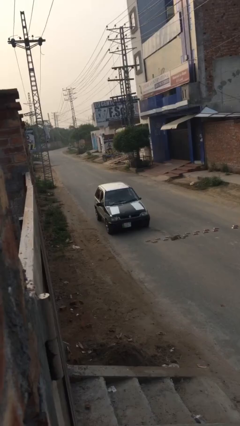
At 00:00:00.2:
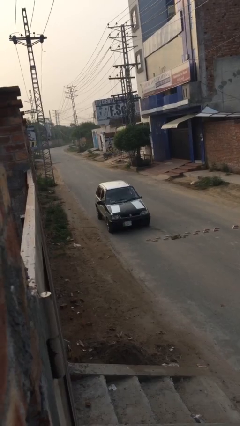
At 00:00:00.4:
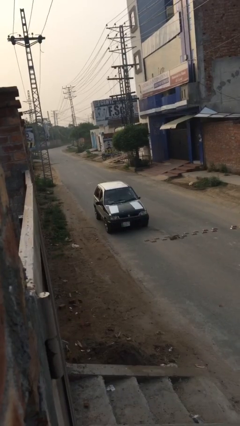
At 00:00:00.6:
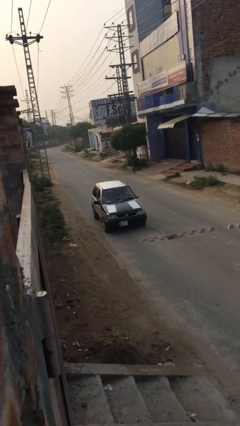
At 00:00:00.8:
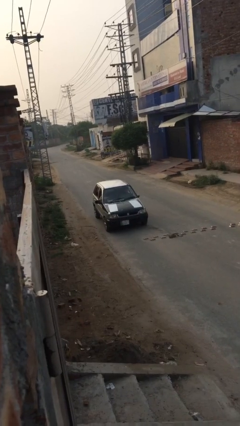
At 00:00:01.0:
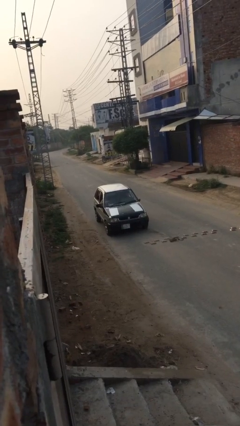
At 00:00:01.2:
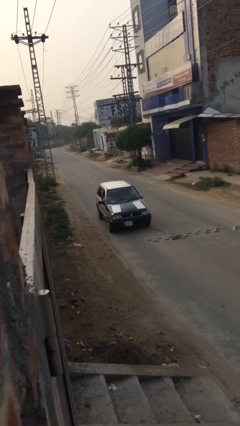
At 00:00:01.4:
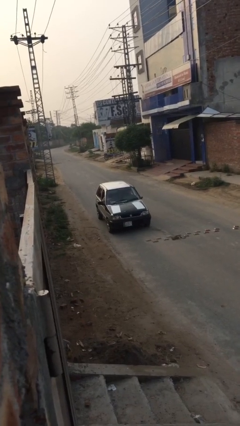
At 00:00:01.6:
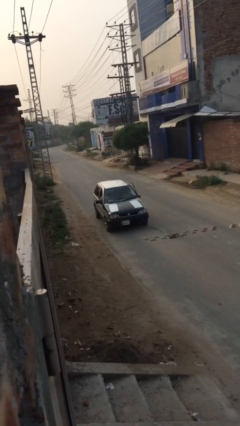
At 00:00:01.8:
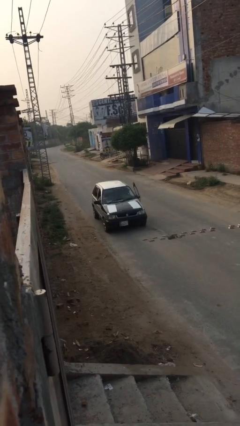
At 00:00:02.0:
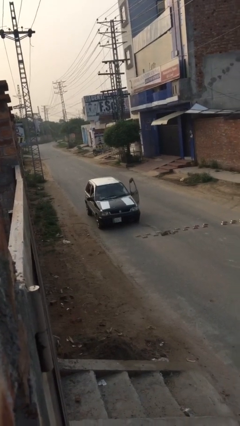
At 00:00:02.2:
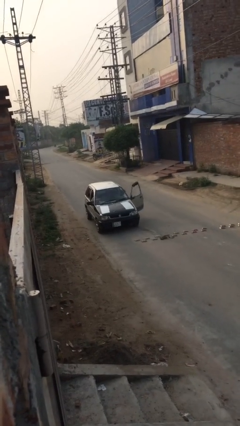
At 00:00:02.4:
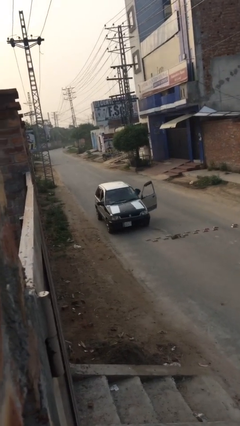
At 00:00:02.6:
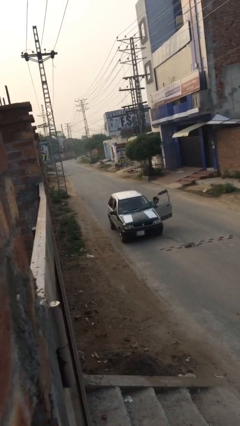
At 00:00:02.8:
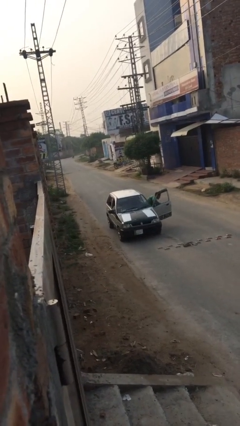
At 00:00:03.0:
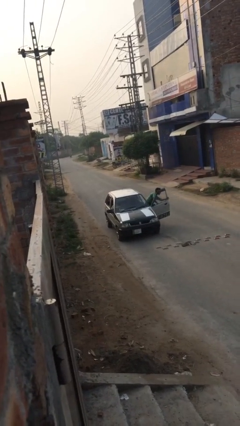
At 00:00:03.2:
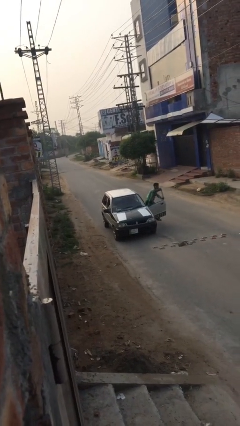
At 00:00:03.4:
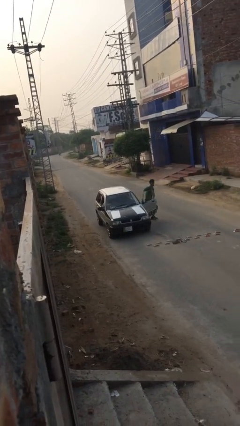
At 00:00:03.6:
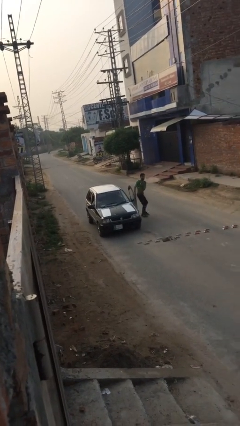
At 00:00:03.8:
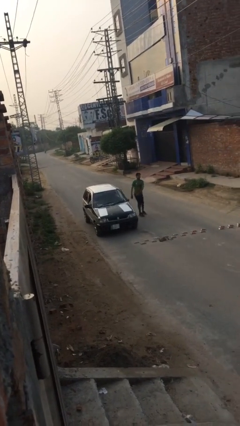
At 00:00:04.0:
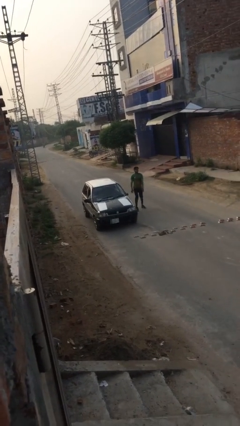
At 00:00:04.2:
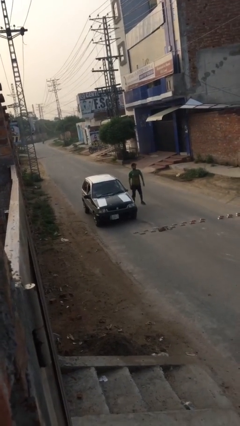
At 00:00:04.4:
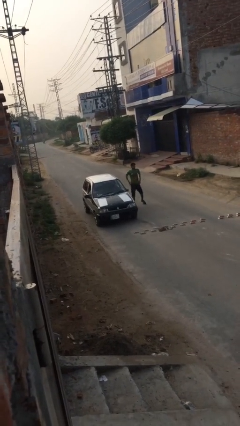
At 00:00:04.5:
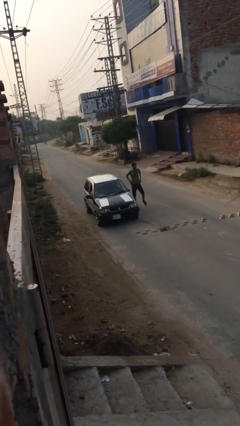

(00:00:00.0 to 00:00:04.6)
car drops off person

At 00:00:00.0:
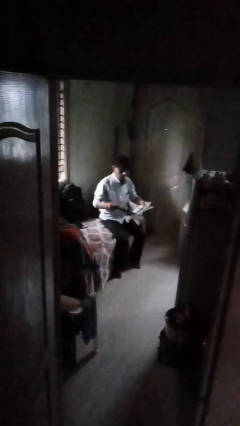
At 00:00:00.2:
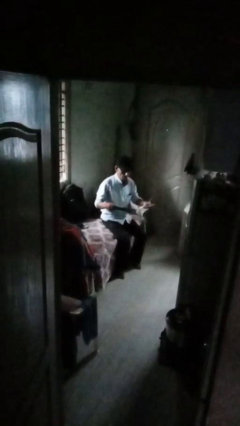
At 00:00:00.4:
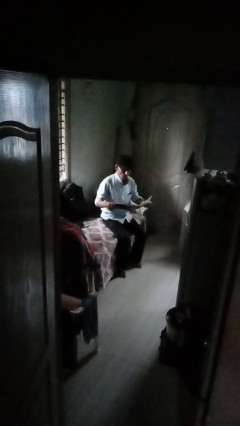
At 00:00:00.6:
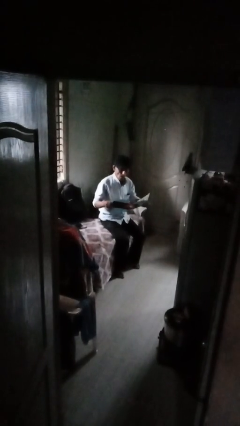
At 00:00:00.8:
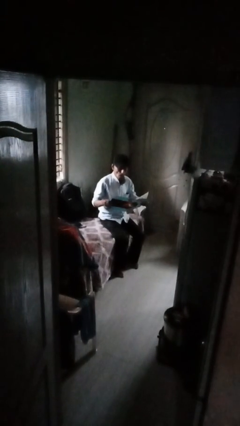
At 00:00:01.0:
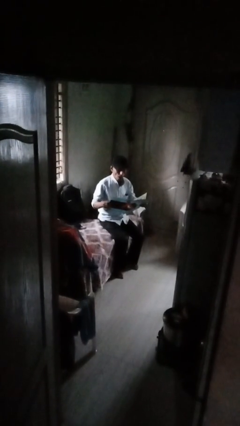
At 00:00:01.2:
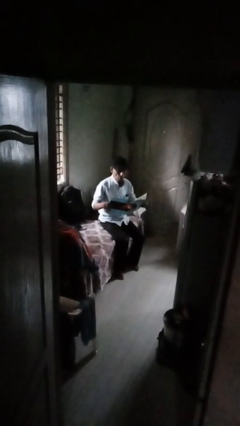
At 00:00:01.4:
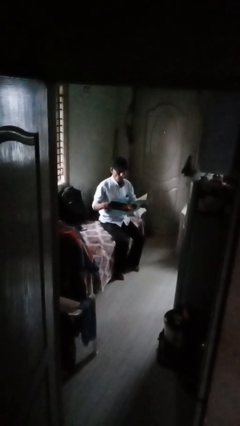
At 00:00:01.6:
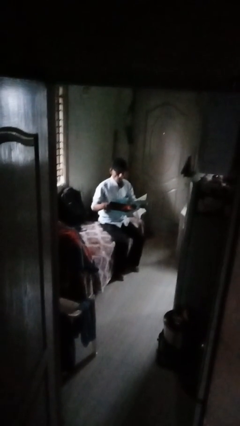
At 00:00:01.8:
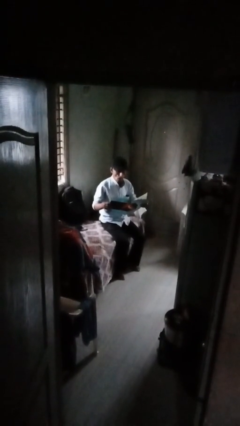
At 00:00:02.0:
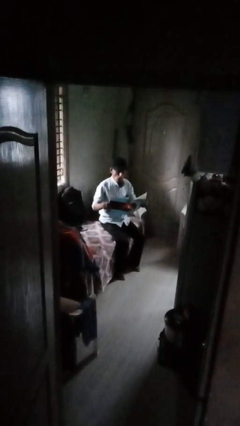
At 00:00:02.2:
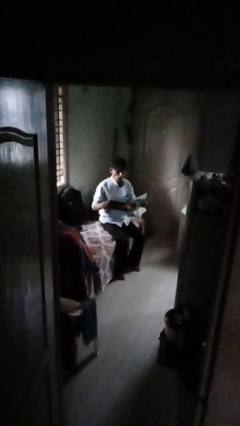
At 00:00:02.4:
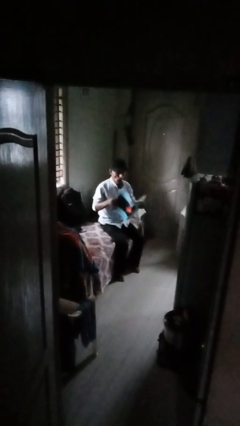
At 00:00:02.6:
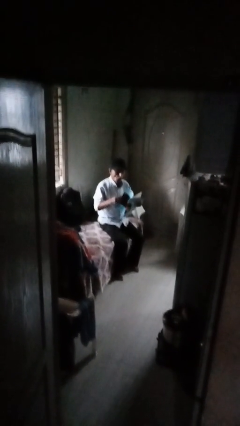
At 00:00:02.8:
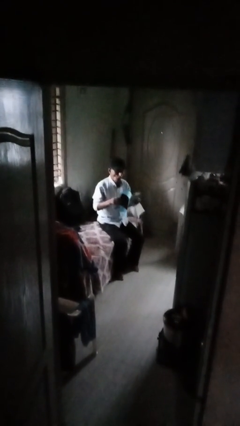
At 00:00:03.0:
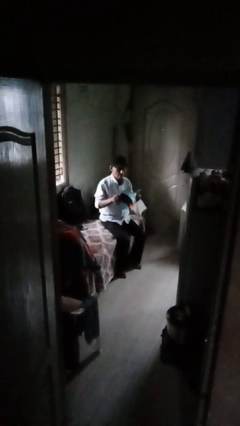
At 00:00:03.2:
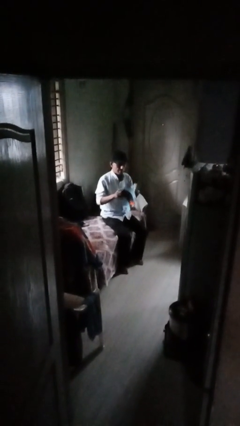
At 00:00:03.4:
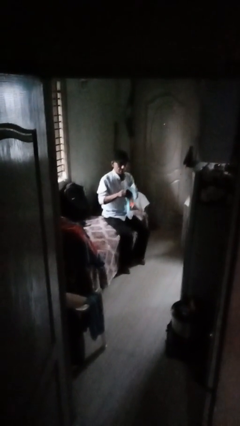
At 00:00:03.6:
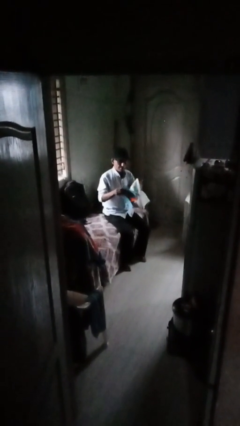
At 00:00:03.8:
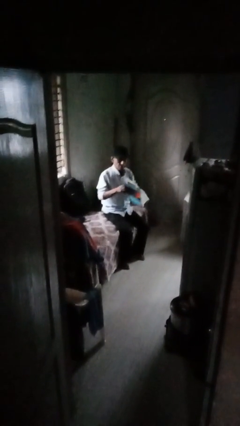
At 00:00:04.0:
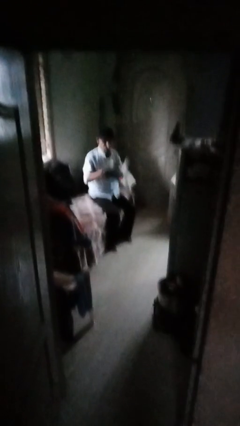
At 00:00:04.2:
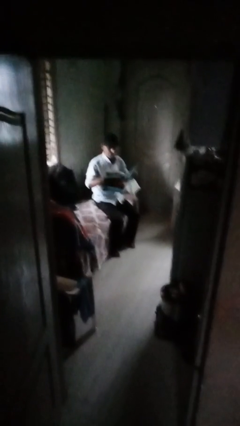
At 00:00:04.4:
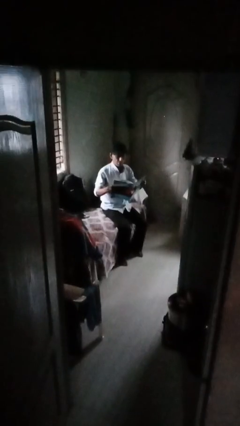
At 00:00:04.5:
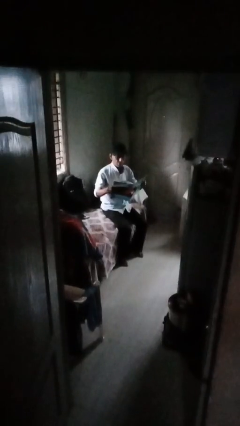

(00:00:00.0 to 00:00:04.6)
person reads magazine

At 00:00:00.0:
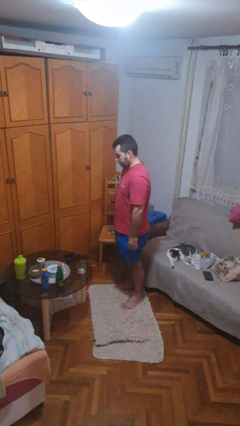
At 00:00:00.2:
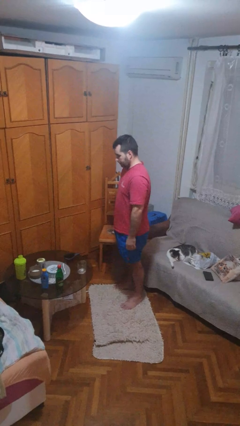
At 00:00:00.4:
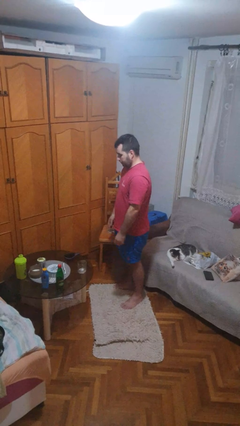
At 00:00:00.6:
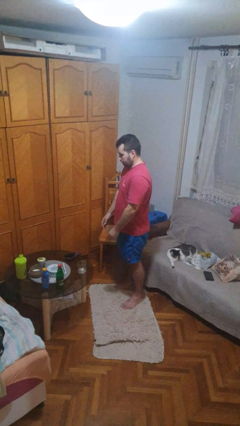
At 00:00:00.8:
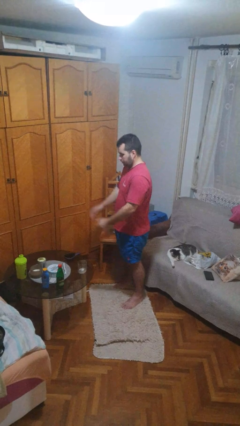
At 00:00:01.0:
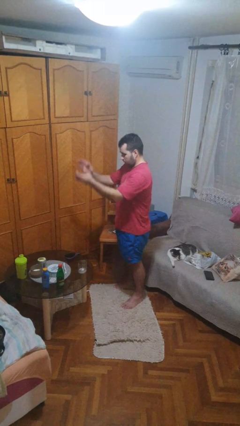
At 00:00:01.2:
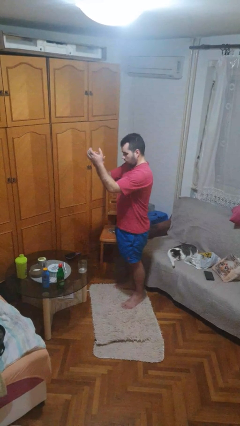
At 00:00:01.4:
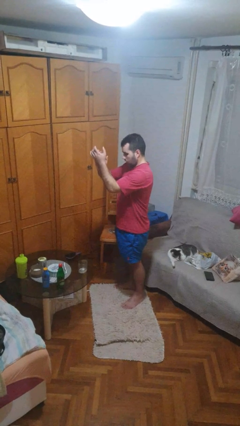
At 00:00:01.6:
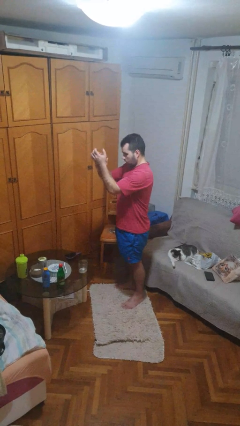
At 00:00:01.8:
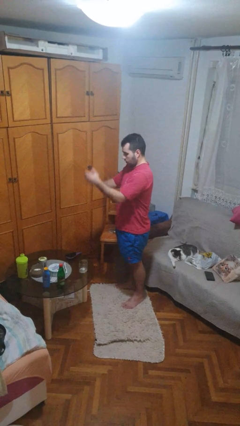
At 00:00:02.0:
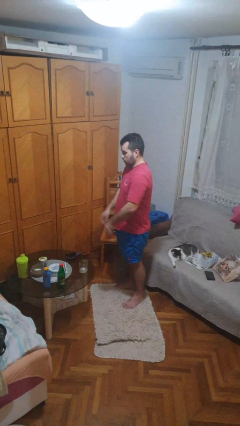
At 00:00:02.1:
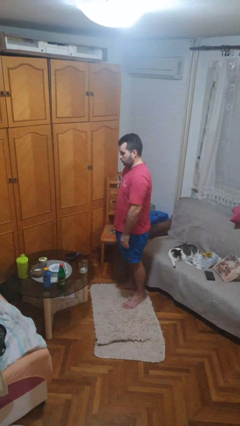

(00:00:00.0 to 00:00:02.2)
person claps hands

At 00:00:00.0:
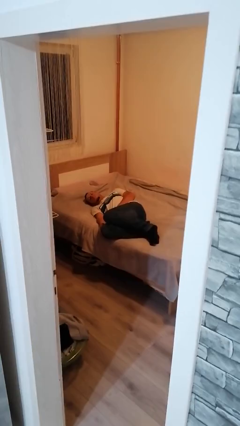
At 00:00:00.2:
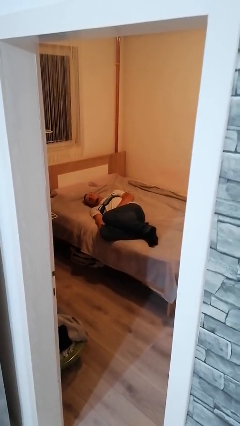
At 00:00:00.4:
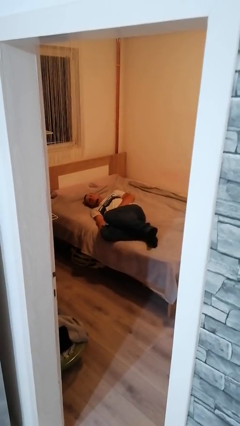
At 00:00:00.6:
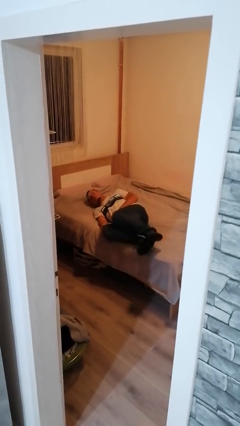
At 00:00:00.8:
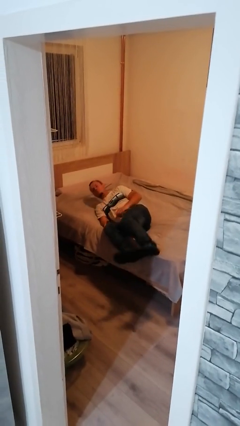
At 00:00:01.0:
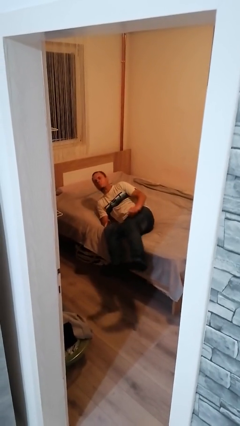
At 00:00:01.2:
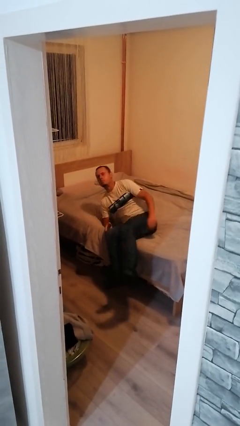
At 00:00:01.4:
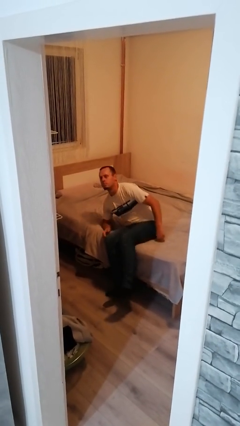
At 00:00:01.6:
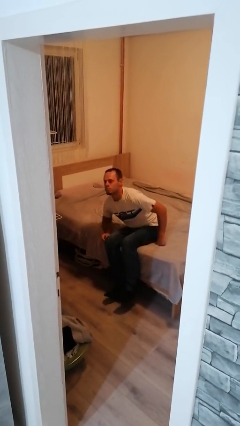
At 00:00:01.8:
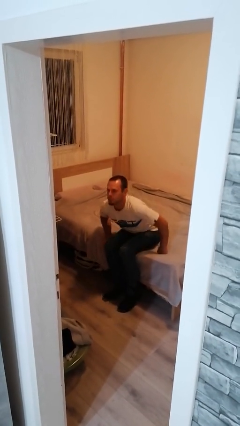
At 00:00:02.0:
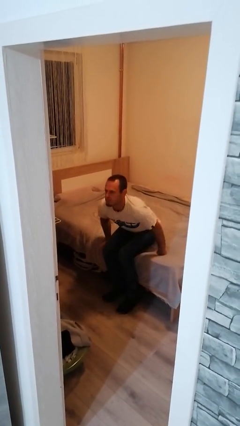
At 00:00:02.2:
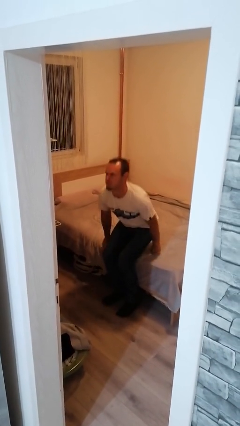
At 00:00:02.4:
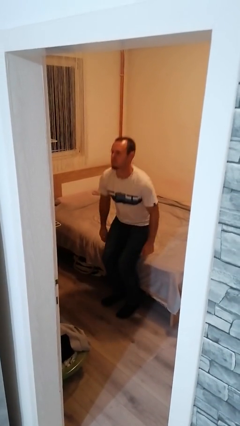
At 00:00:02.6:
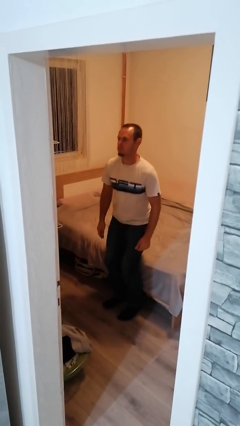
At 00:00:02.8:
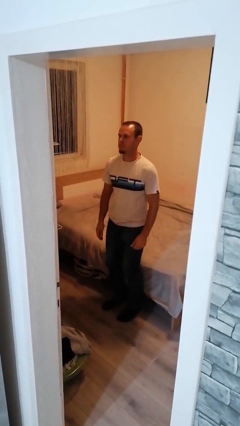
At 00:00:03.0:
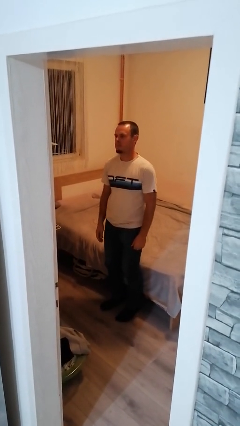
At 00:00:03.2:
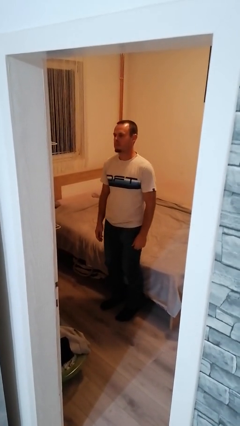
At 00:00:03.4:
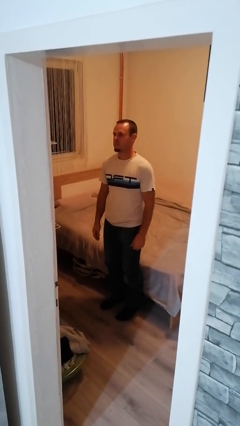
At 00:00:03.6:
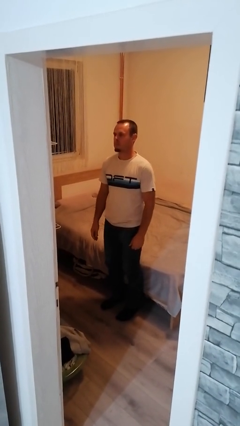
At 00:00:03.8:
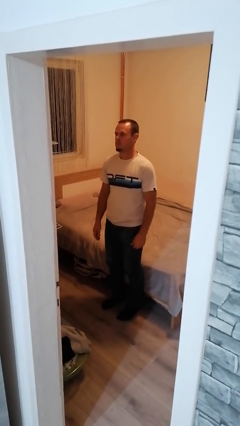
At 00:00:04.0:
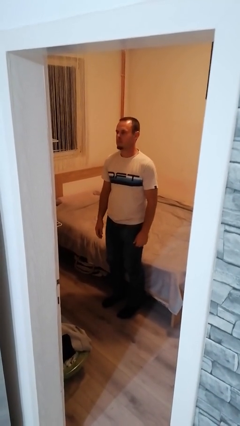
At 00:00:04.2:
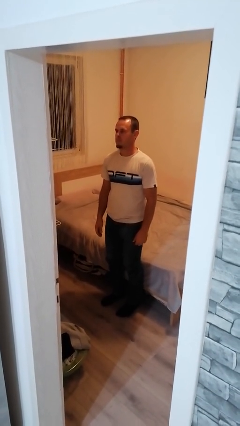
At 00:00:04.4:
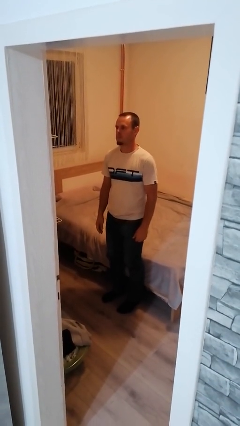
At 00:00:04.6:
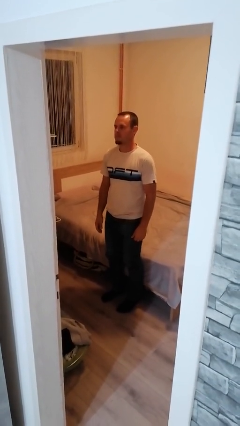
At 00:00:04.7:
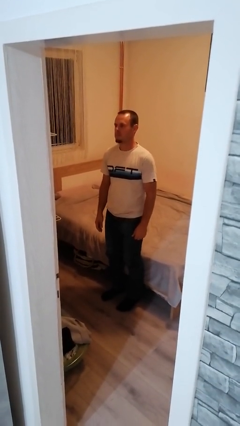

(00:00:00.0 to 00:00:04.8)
person stands up

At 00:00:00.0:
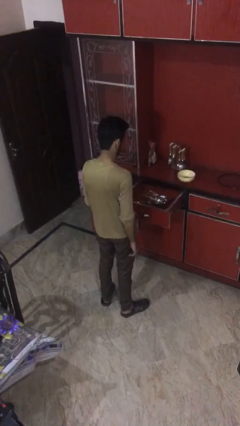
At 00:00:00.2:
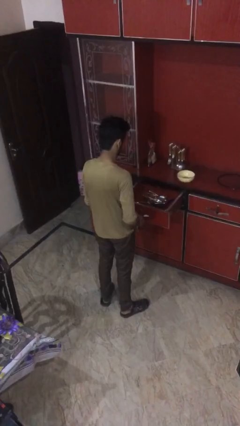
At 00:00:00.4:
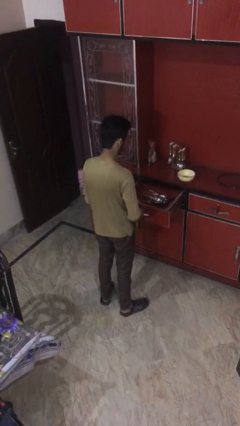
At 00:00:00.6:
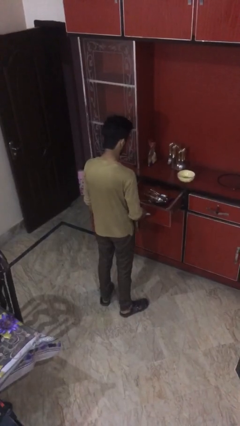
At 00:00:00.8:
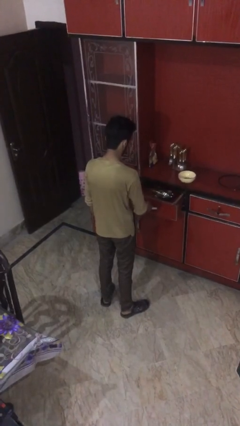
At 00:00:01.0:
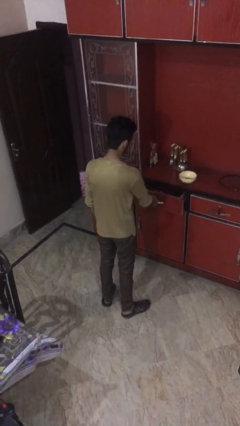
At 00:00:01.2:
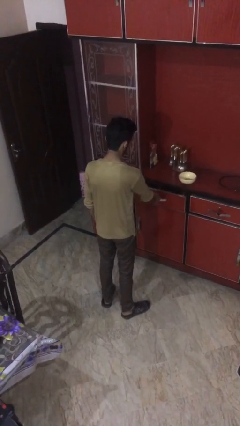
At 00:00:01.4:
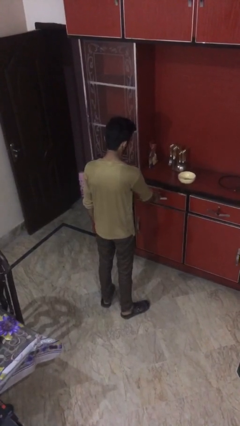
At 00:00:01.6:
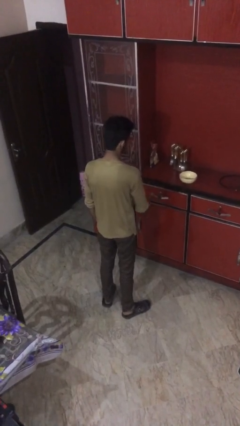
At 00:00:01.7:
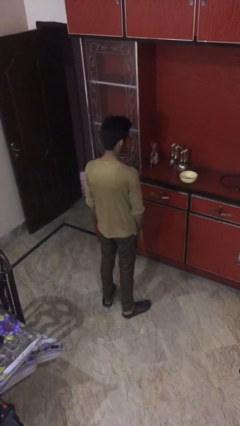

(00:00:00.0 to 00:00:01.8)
person closes kitchen drawer
